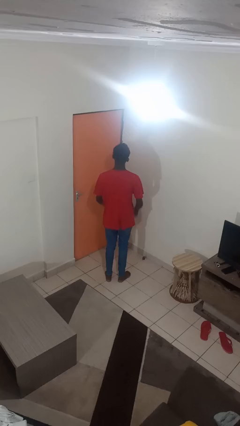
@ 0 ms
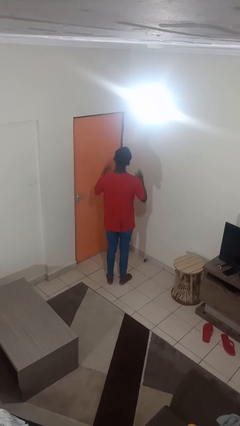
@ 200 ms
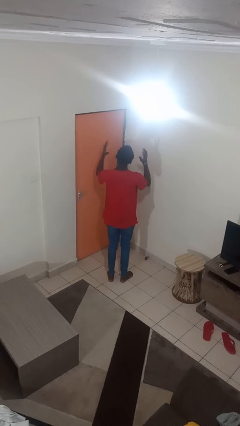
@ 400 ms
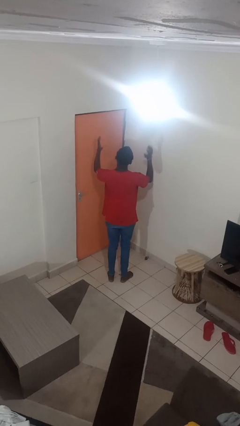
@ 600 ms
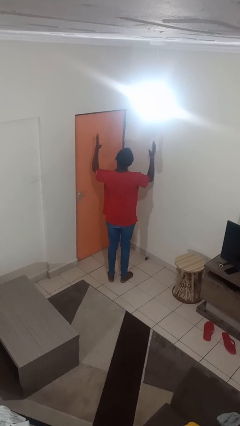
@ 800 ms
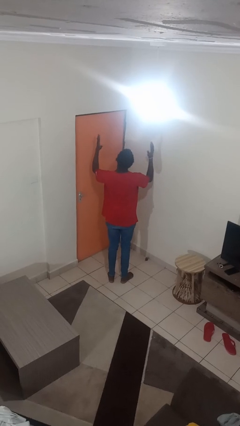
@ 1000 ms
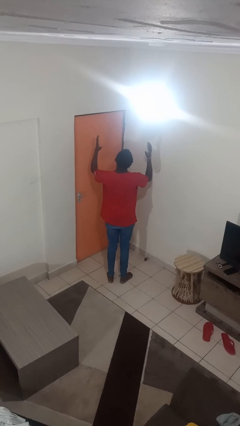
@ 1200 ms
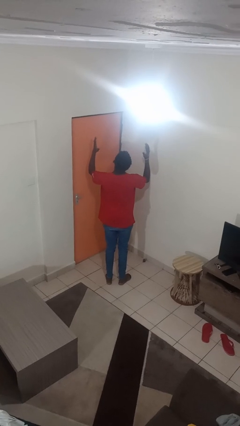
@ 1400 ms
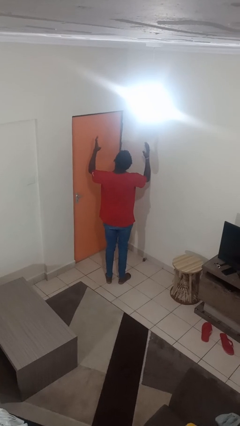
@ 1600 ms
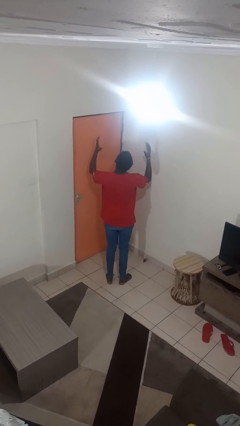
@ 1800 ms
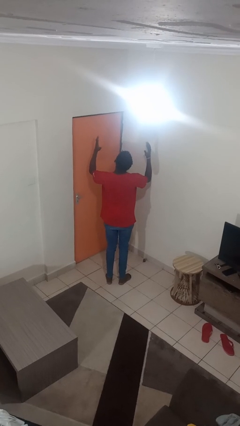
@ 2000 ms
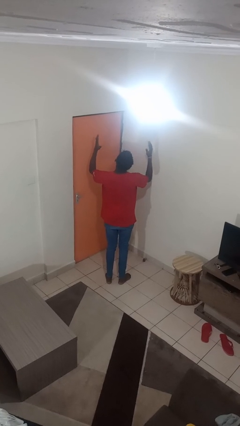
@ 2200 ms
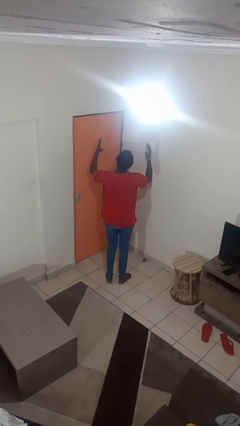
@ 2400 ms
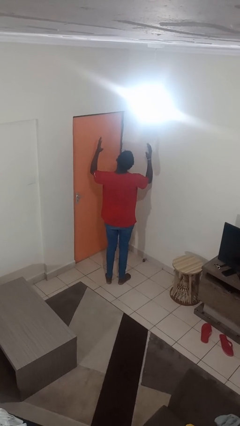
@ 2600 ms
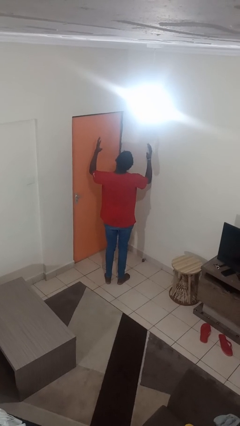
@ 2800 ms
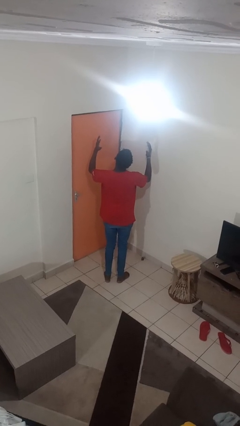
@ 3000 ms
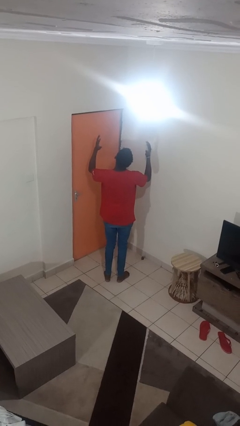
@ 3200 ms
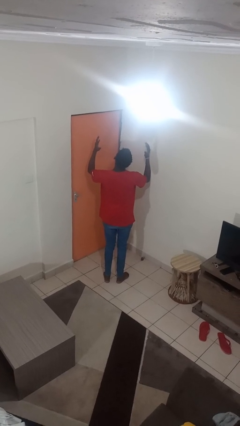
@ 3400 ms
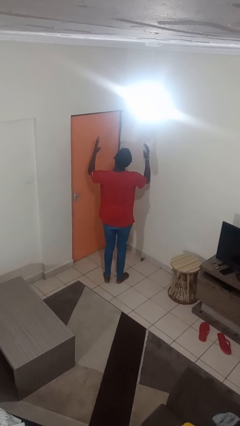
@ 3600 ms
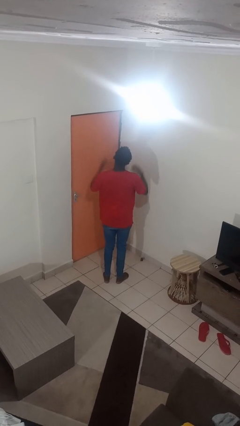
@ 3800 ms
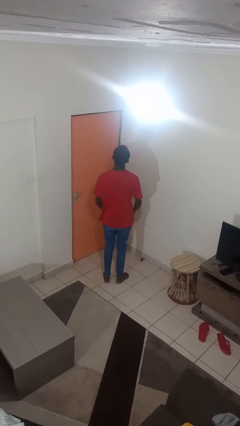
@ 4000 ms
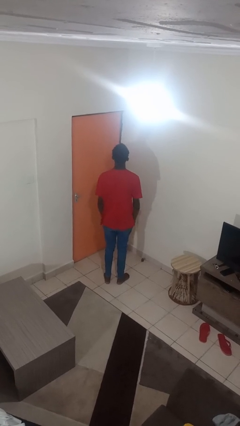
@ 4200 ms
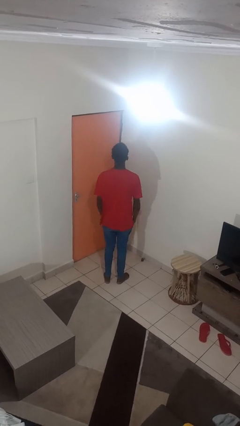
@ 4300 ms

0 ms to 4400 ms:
person prays

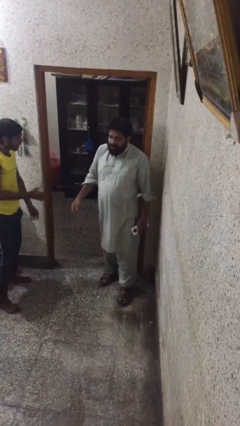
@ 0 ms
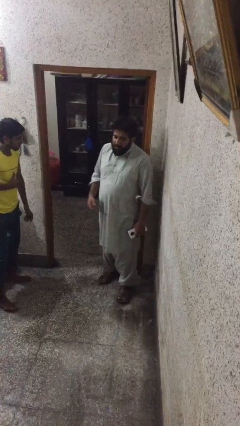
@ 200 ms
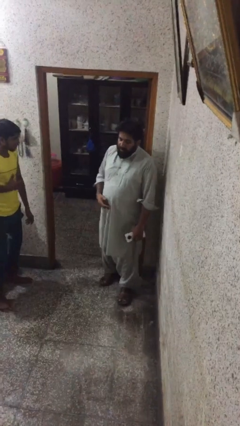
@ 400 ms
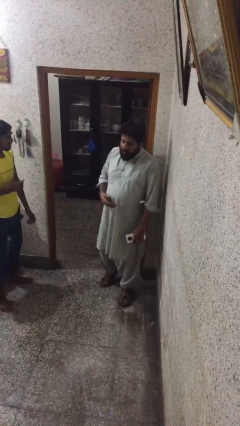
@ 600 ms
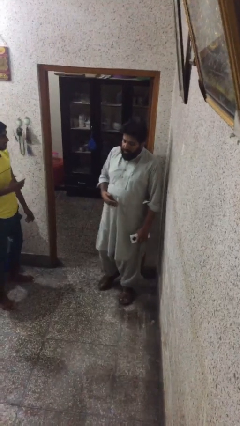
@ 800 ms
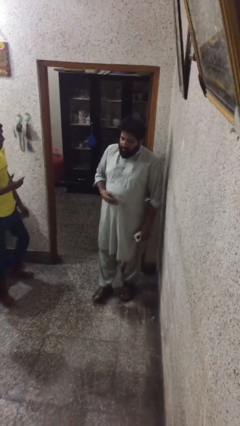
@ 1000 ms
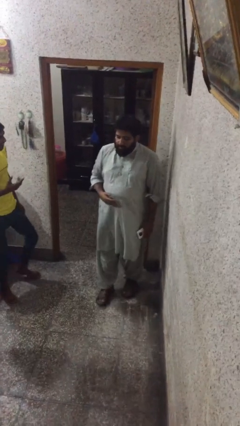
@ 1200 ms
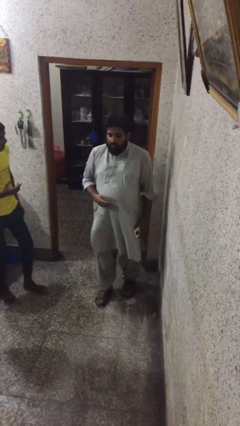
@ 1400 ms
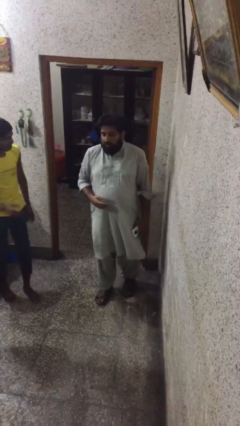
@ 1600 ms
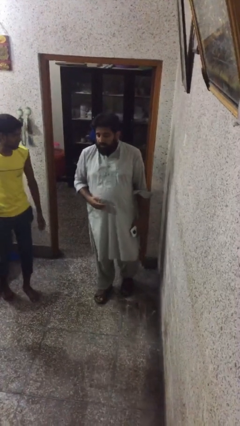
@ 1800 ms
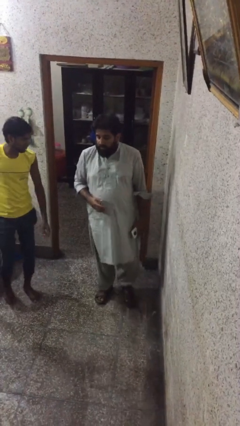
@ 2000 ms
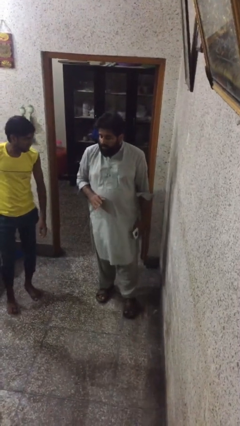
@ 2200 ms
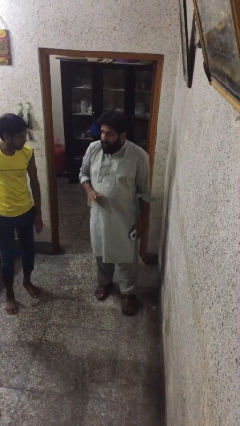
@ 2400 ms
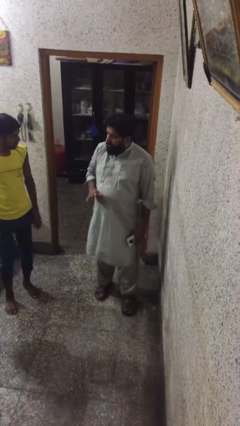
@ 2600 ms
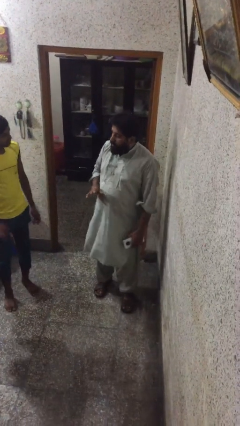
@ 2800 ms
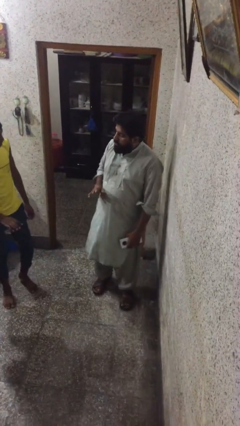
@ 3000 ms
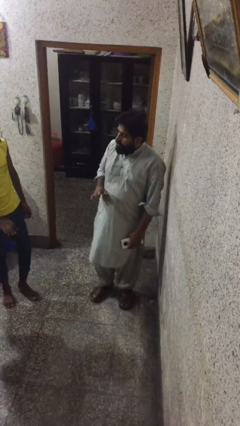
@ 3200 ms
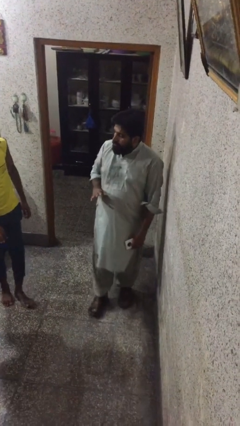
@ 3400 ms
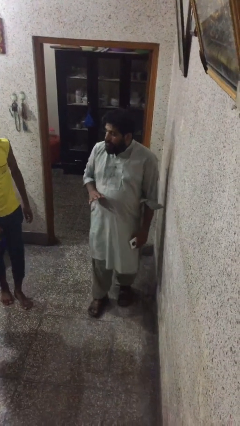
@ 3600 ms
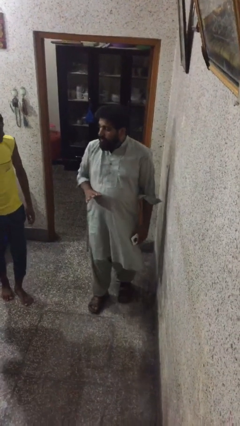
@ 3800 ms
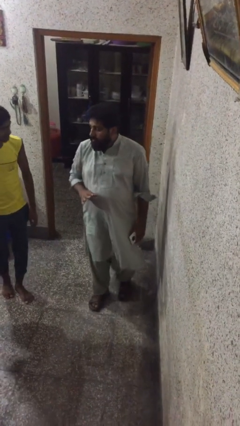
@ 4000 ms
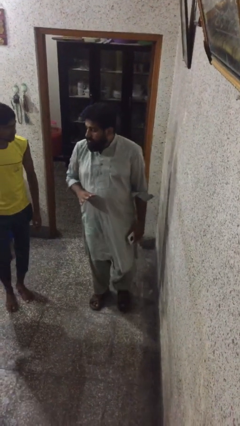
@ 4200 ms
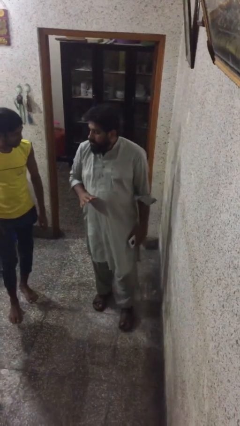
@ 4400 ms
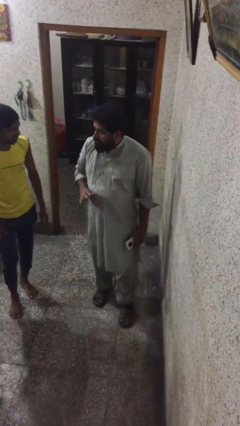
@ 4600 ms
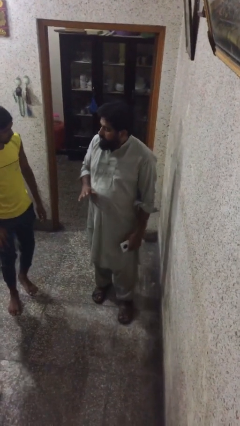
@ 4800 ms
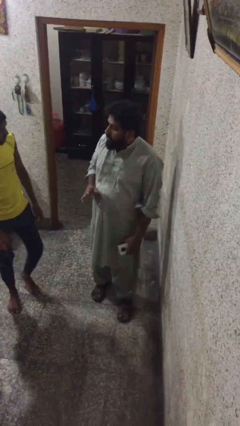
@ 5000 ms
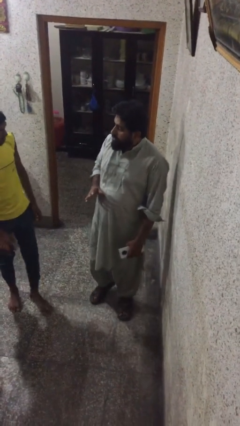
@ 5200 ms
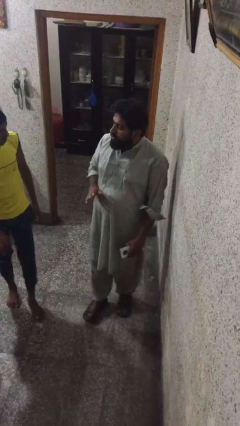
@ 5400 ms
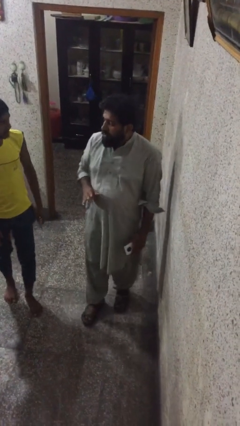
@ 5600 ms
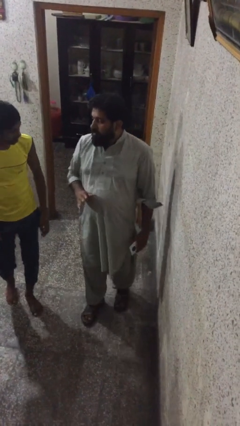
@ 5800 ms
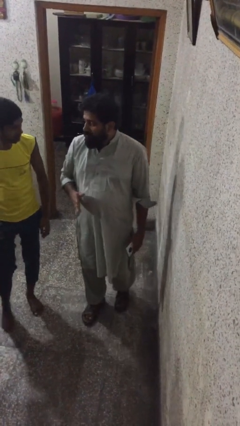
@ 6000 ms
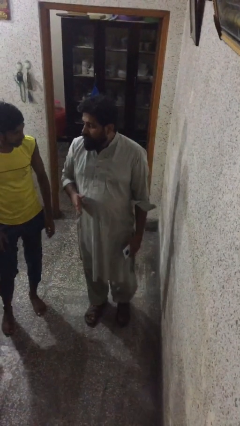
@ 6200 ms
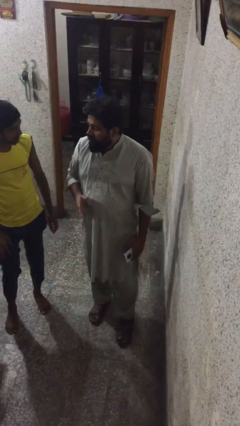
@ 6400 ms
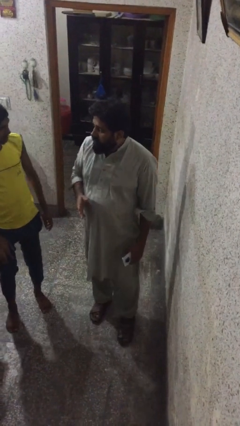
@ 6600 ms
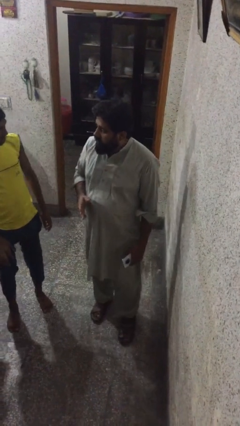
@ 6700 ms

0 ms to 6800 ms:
person talks to person

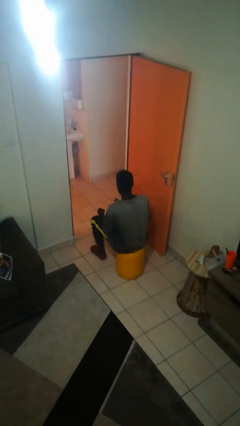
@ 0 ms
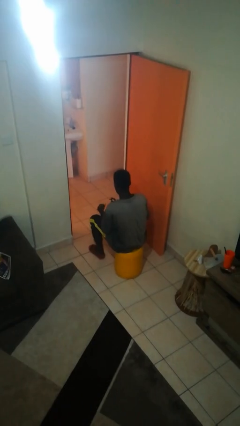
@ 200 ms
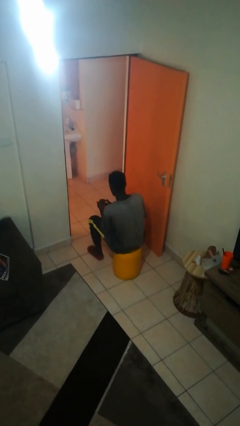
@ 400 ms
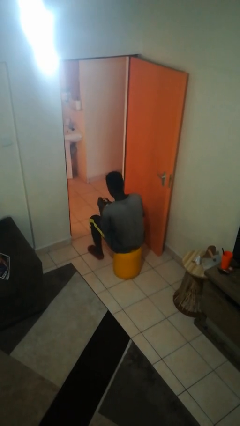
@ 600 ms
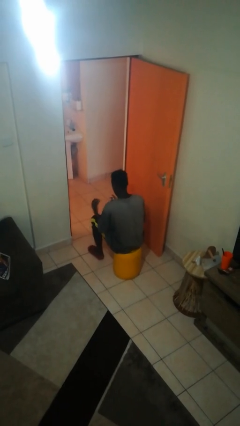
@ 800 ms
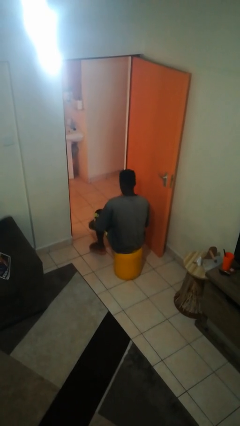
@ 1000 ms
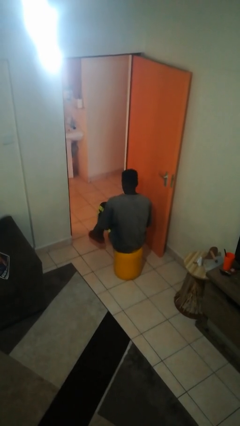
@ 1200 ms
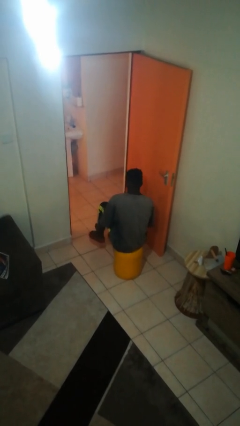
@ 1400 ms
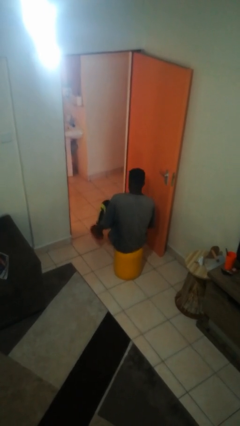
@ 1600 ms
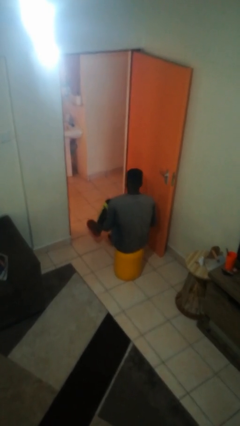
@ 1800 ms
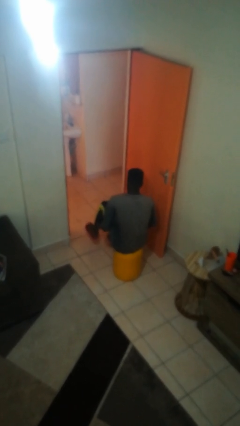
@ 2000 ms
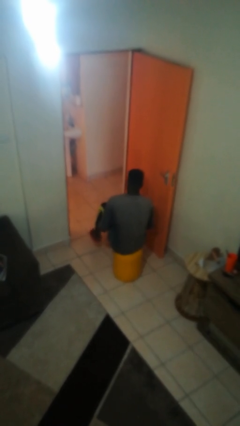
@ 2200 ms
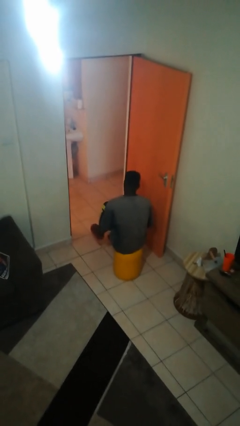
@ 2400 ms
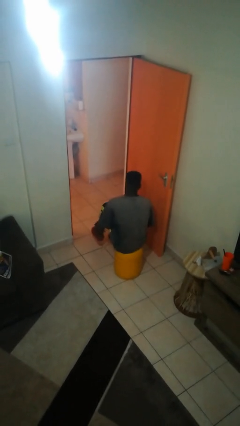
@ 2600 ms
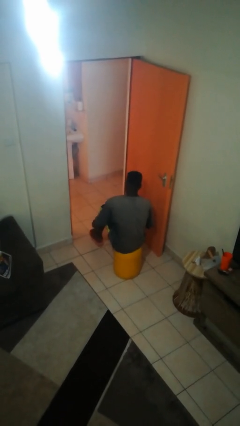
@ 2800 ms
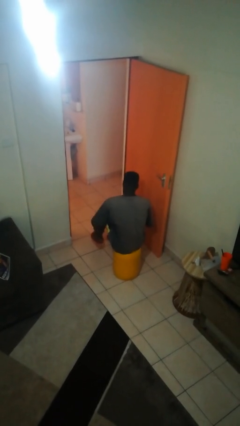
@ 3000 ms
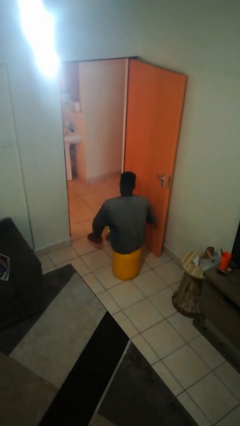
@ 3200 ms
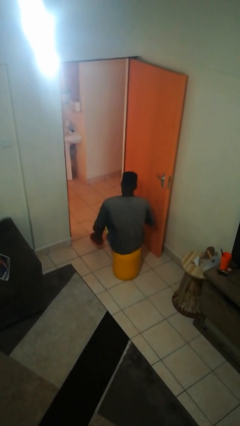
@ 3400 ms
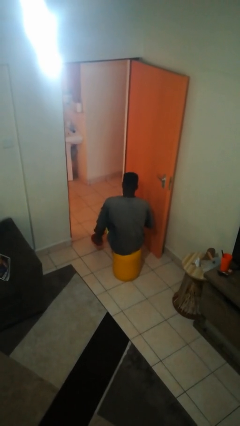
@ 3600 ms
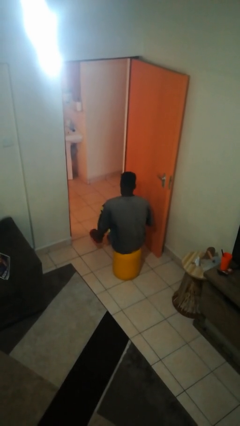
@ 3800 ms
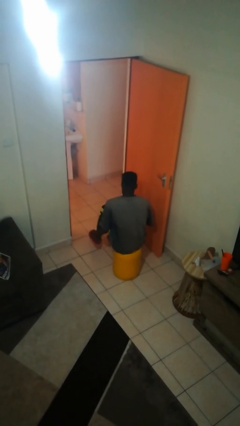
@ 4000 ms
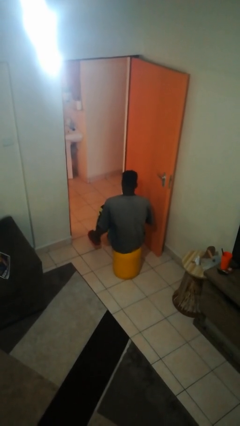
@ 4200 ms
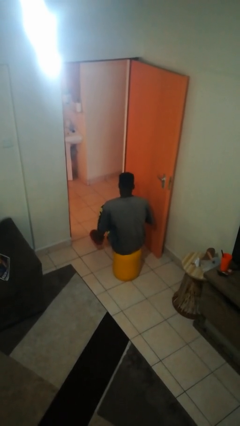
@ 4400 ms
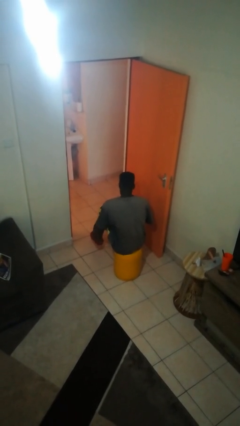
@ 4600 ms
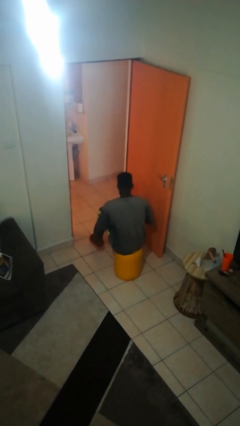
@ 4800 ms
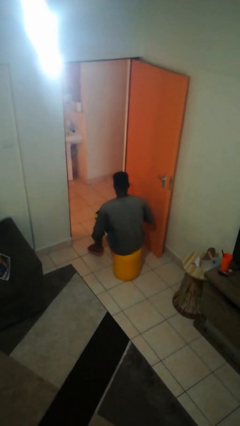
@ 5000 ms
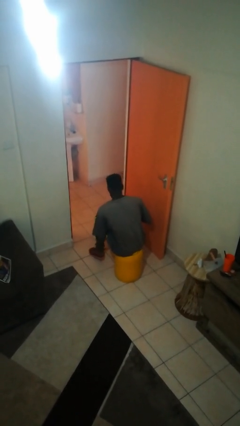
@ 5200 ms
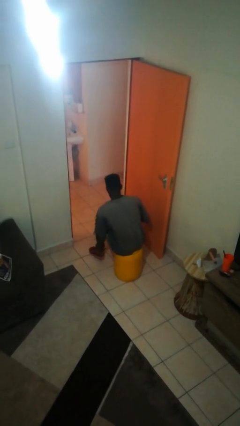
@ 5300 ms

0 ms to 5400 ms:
person applies sunscreen

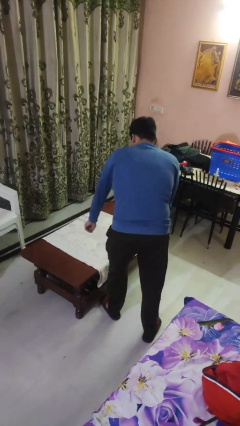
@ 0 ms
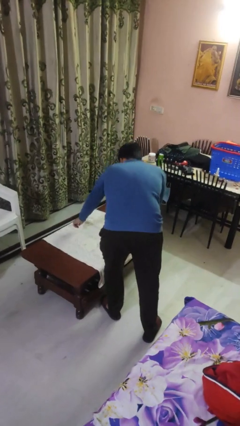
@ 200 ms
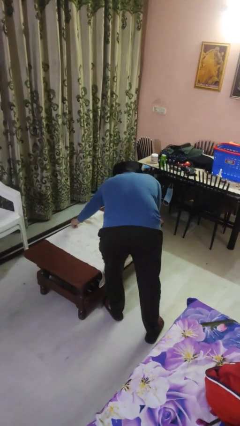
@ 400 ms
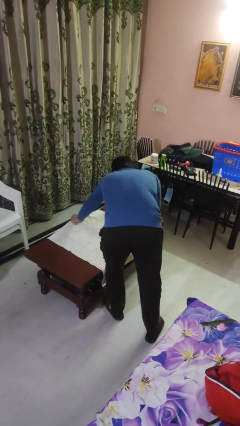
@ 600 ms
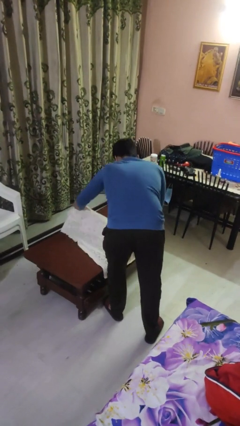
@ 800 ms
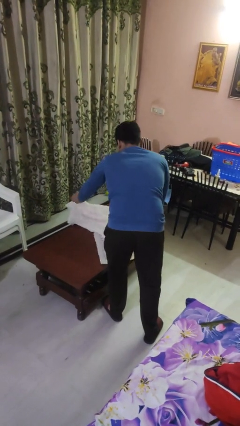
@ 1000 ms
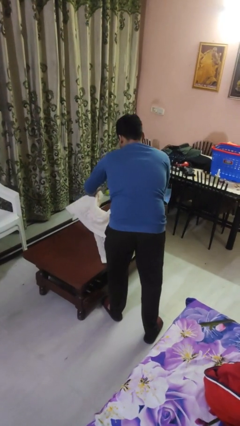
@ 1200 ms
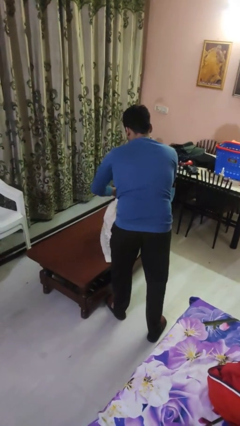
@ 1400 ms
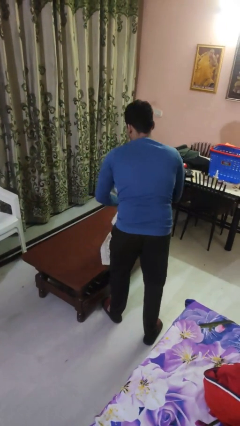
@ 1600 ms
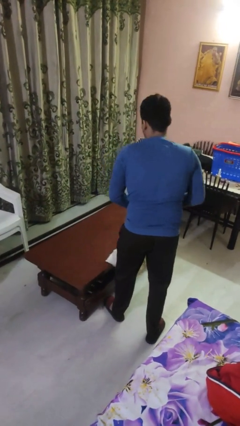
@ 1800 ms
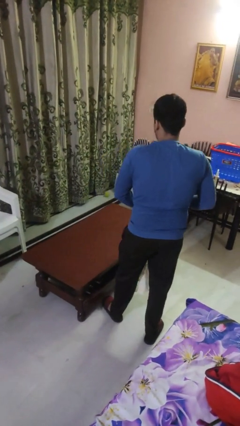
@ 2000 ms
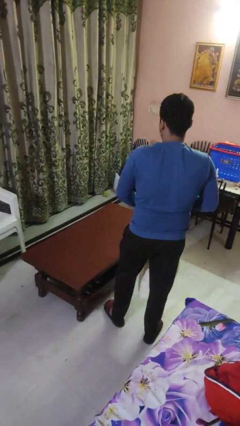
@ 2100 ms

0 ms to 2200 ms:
person folds tablecloth
